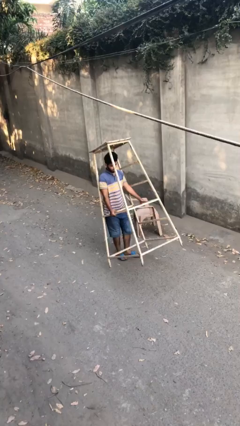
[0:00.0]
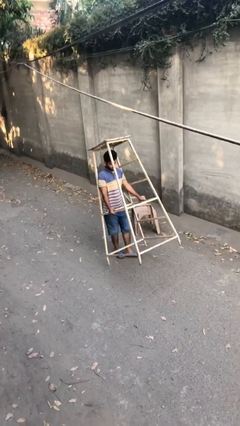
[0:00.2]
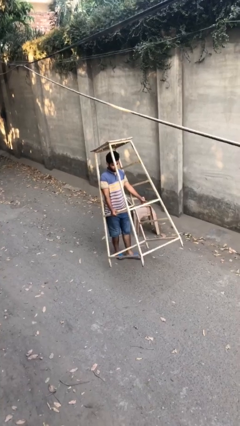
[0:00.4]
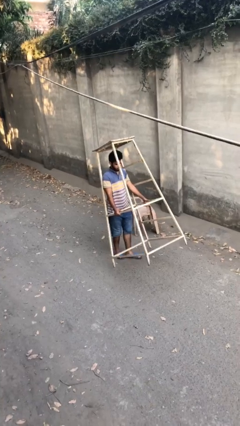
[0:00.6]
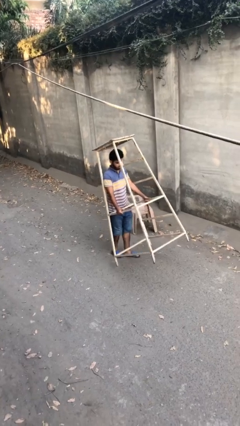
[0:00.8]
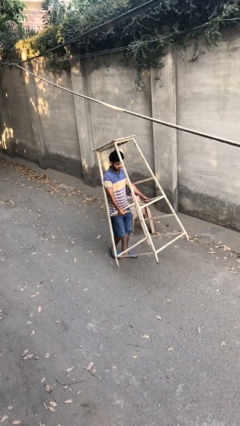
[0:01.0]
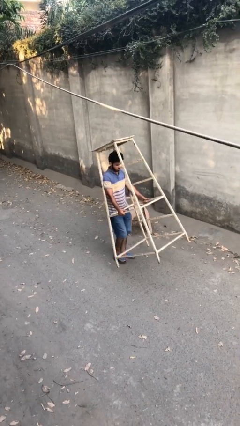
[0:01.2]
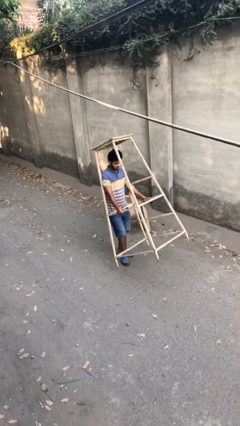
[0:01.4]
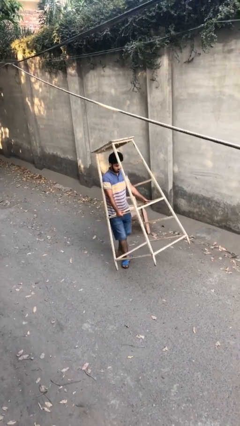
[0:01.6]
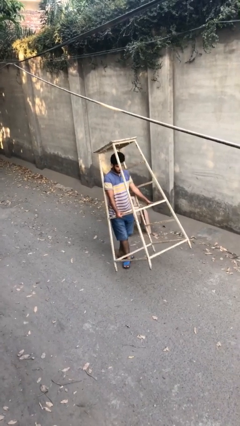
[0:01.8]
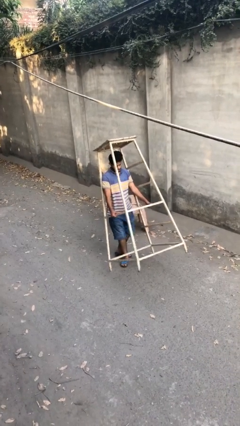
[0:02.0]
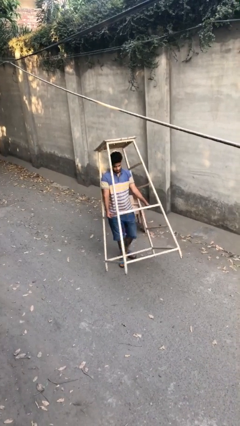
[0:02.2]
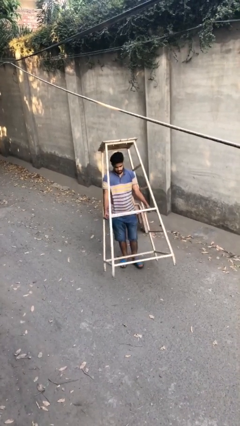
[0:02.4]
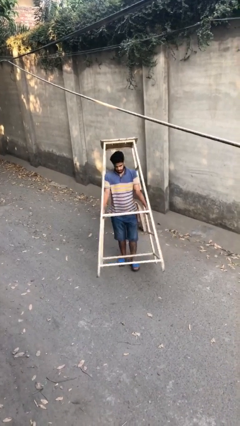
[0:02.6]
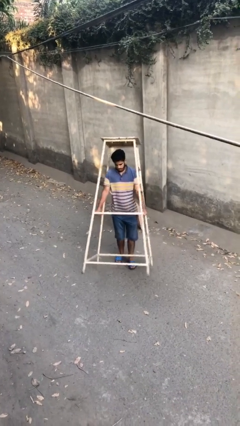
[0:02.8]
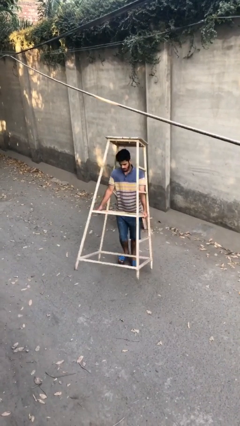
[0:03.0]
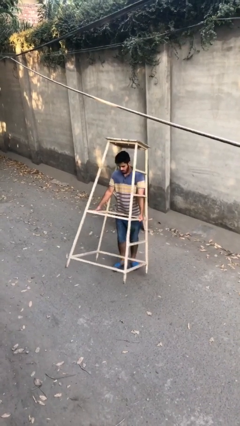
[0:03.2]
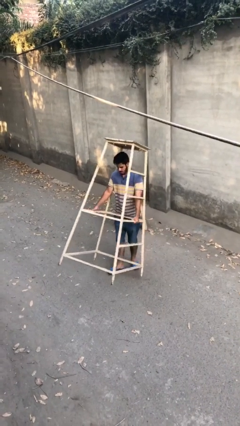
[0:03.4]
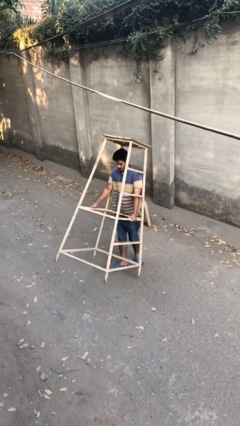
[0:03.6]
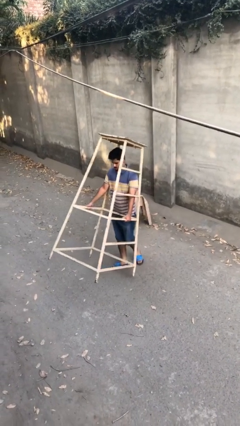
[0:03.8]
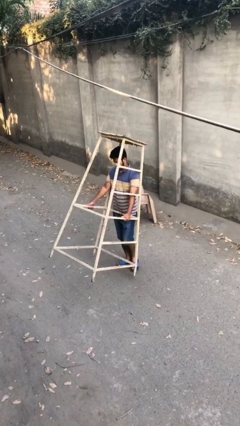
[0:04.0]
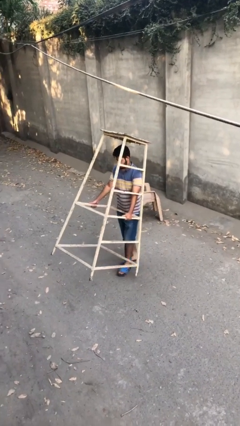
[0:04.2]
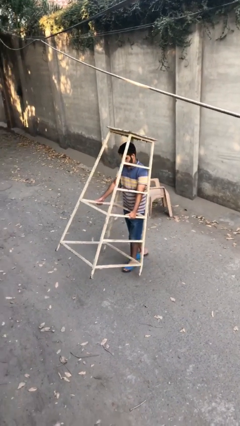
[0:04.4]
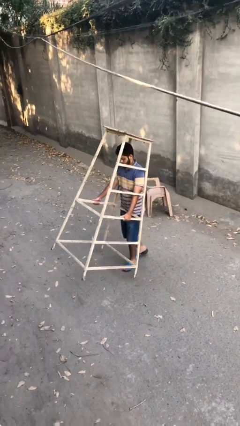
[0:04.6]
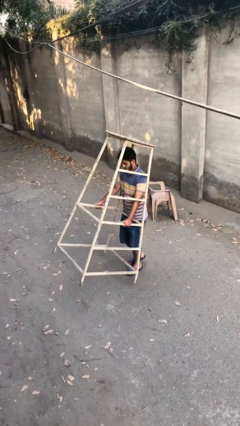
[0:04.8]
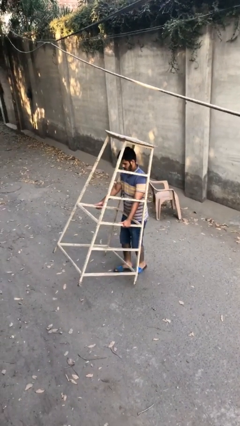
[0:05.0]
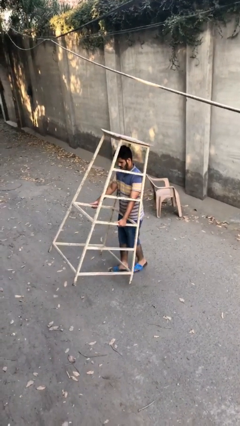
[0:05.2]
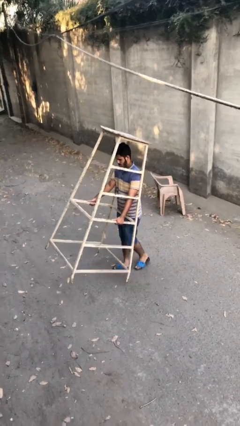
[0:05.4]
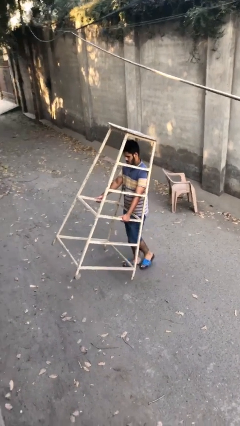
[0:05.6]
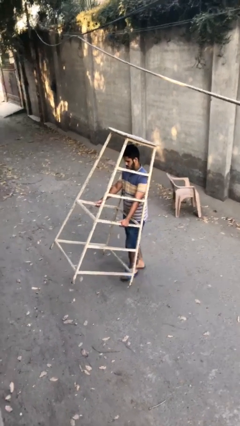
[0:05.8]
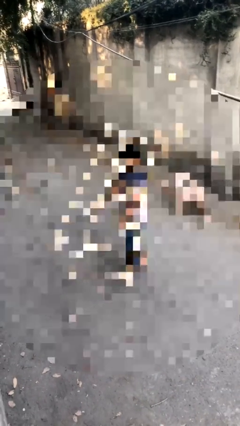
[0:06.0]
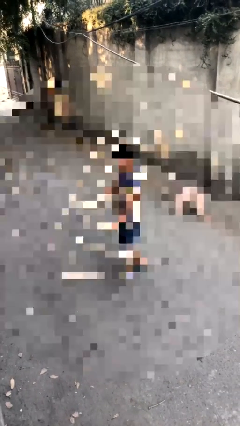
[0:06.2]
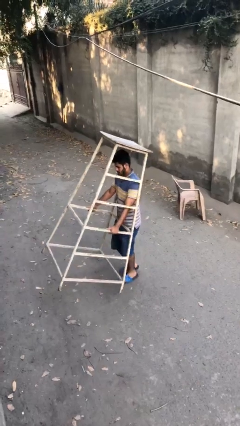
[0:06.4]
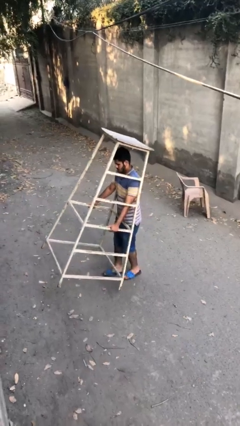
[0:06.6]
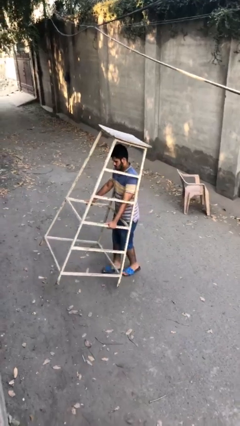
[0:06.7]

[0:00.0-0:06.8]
person carries heavy object

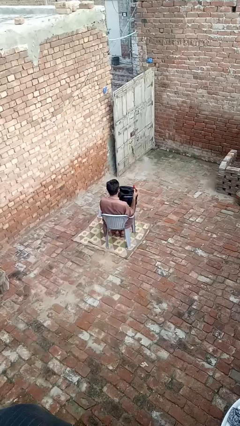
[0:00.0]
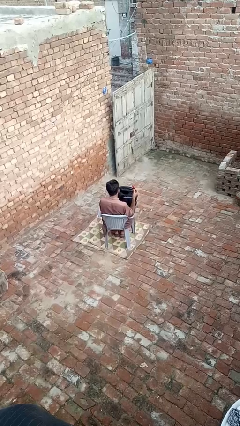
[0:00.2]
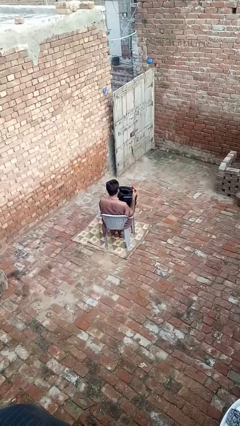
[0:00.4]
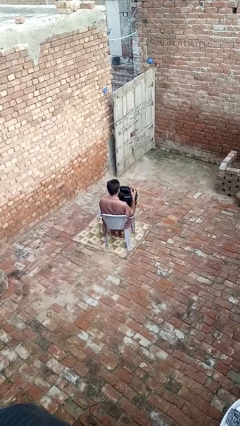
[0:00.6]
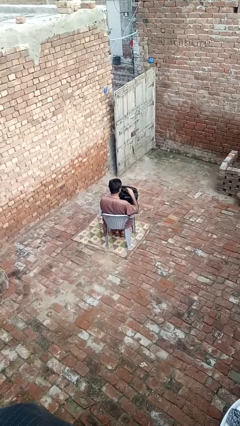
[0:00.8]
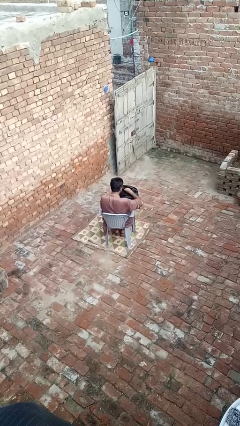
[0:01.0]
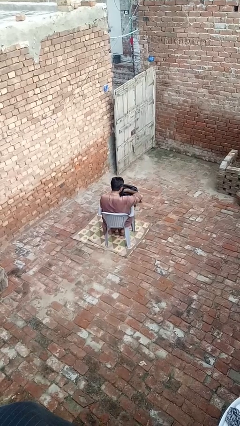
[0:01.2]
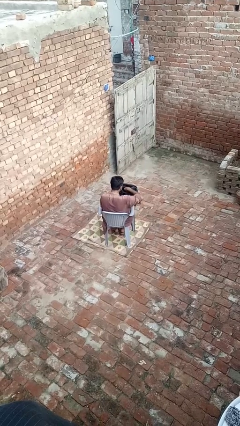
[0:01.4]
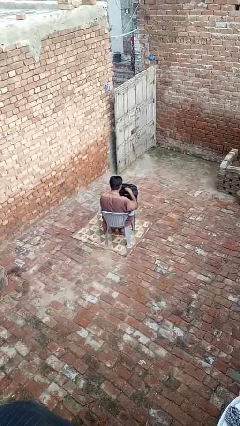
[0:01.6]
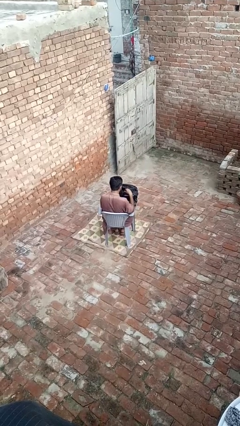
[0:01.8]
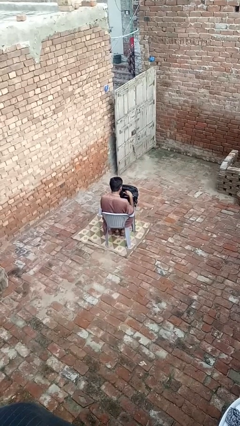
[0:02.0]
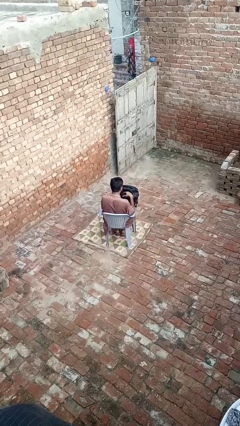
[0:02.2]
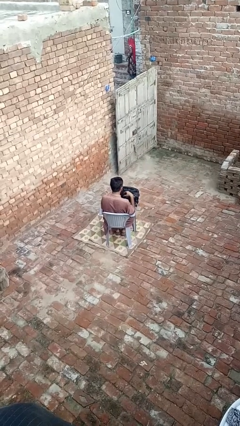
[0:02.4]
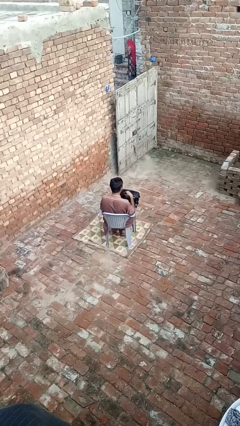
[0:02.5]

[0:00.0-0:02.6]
person puts object into backpack

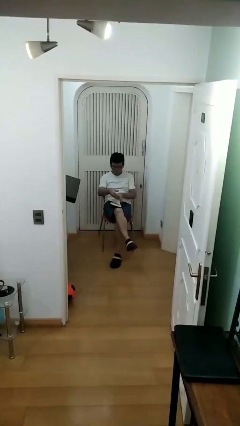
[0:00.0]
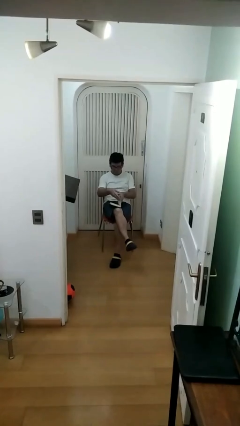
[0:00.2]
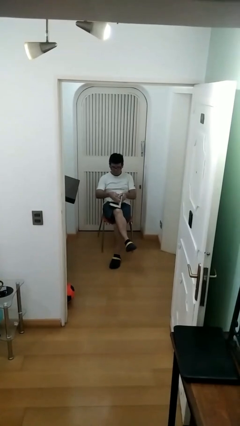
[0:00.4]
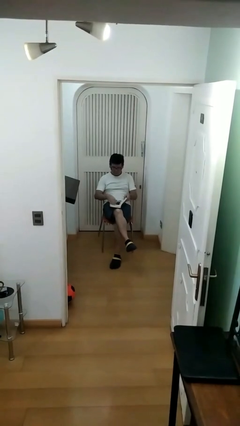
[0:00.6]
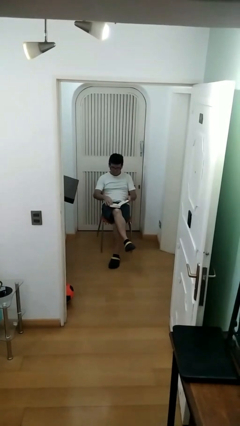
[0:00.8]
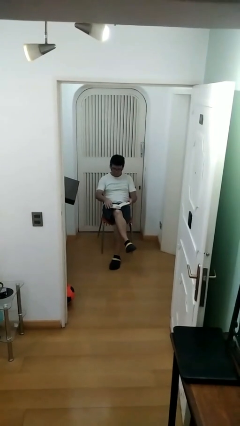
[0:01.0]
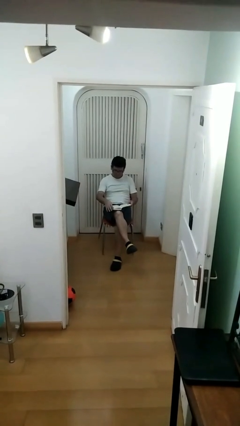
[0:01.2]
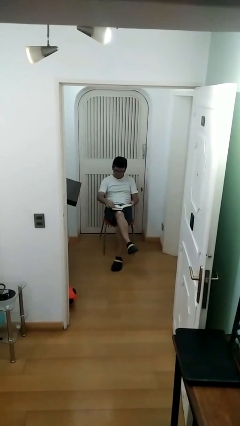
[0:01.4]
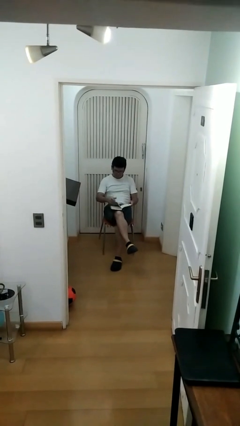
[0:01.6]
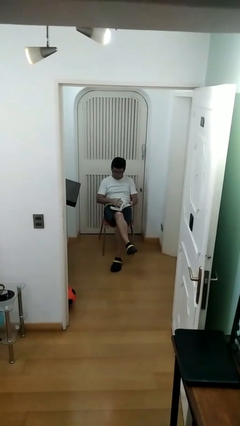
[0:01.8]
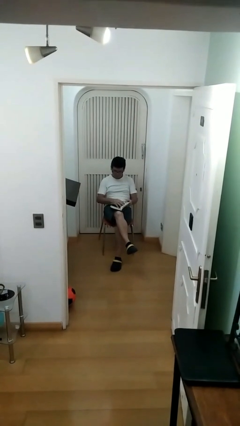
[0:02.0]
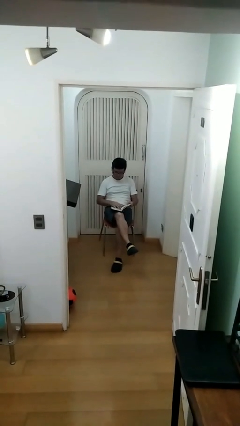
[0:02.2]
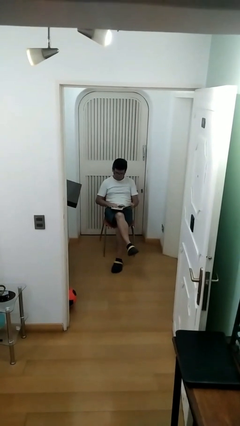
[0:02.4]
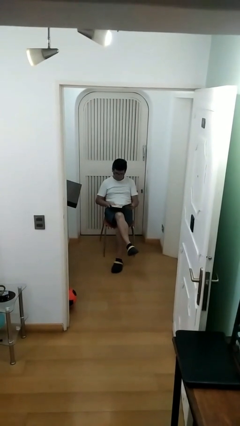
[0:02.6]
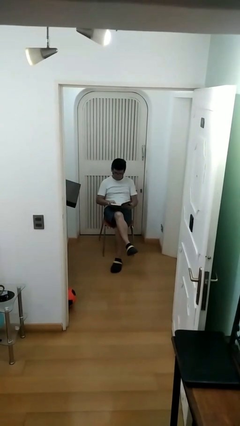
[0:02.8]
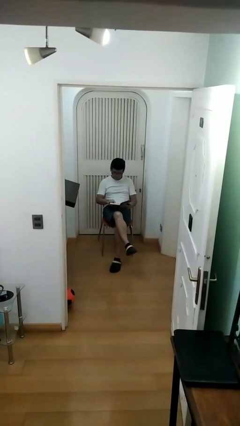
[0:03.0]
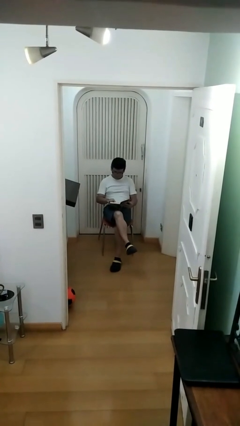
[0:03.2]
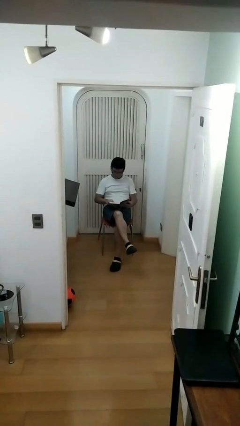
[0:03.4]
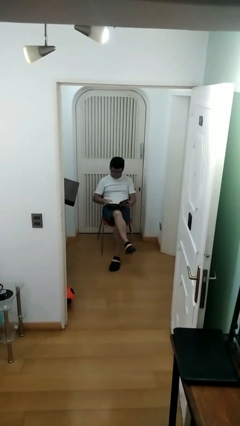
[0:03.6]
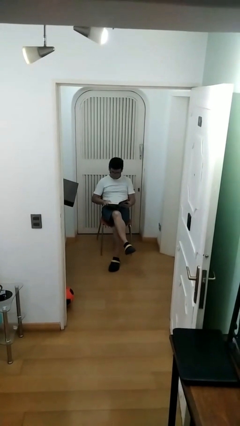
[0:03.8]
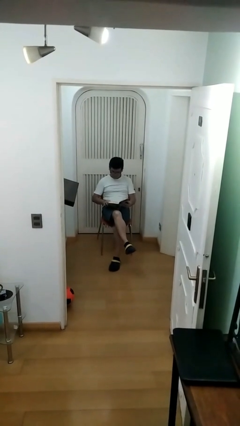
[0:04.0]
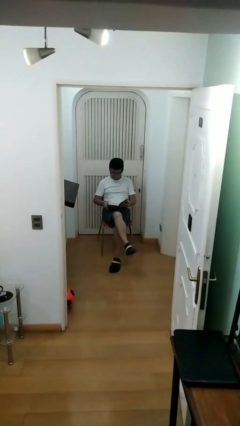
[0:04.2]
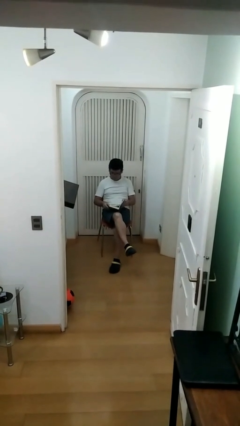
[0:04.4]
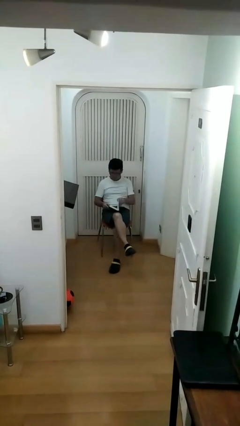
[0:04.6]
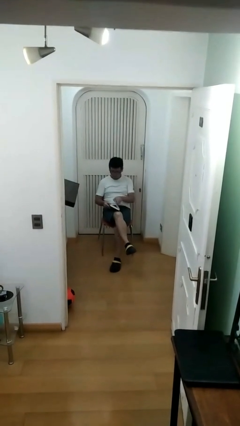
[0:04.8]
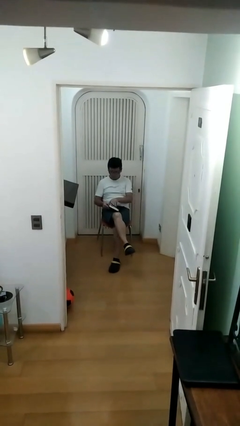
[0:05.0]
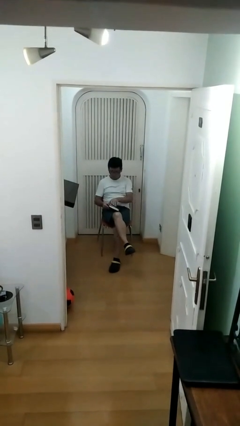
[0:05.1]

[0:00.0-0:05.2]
person reads document

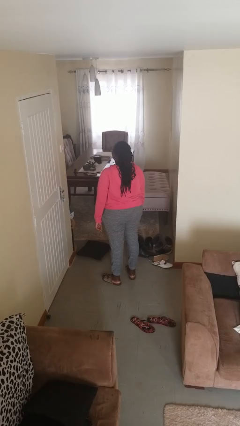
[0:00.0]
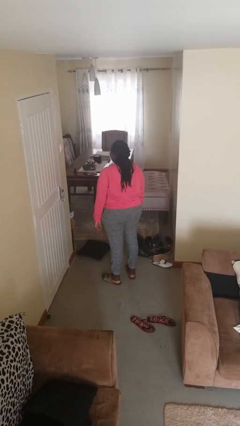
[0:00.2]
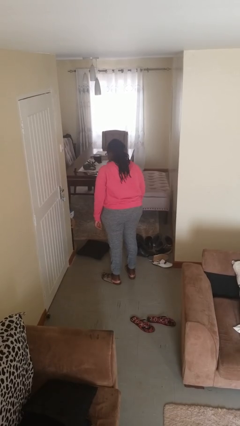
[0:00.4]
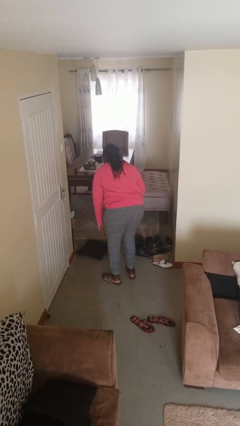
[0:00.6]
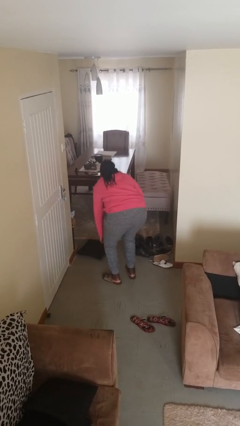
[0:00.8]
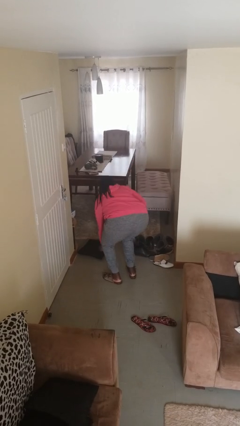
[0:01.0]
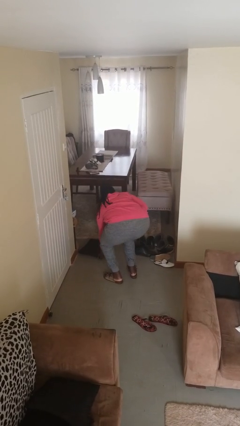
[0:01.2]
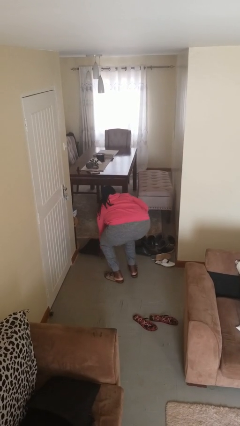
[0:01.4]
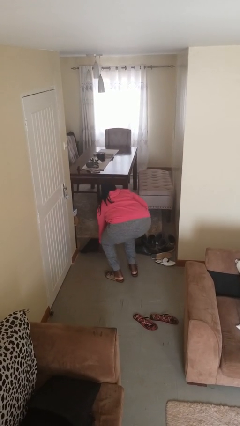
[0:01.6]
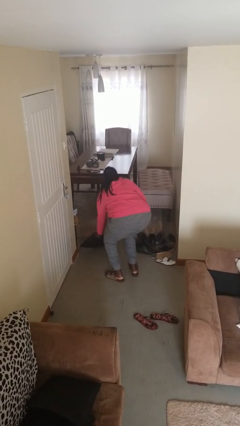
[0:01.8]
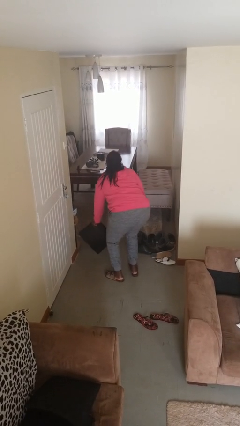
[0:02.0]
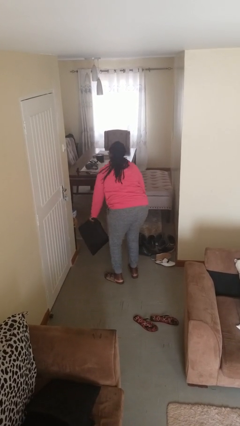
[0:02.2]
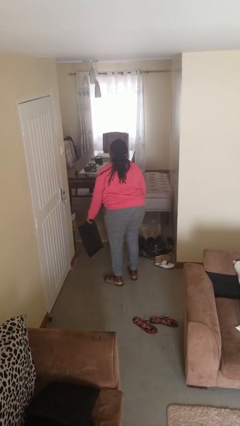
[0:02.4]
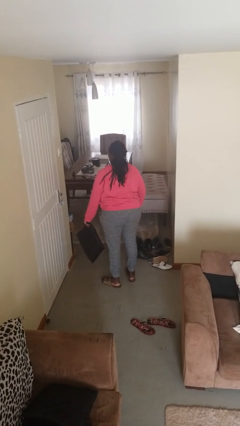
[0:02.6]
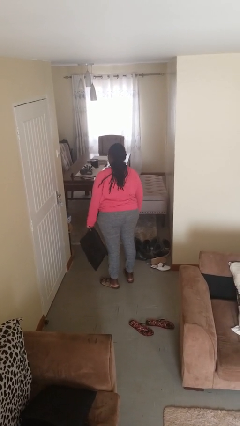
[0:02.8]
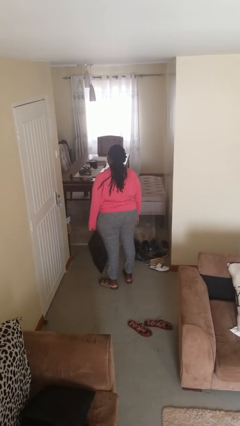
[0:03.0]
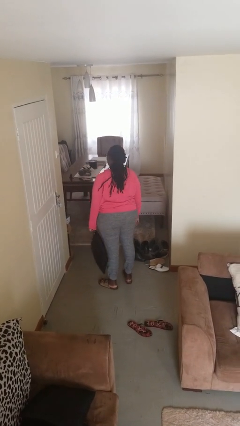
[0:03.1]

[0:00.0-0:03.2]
person picks up object from floor

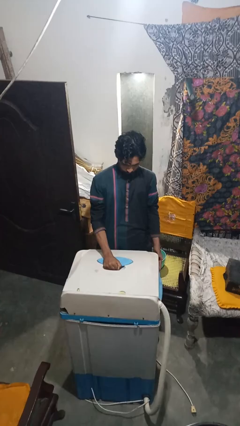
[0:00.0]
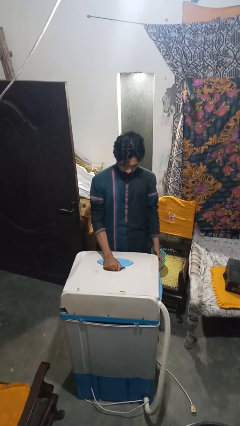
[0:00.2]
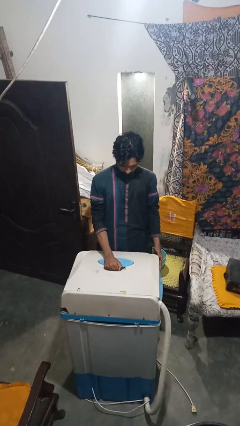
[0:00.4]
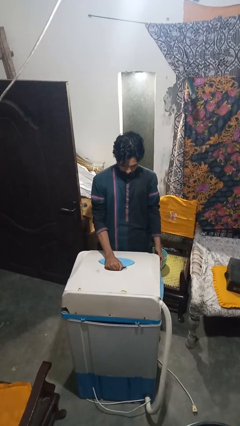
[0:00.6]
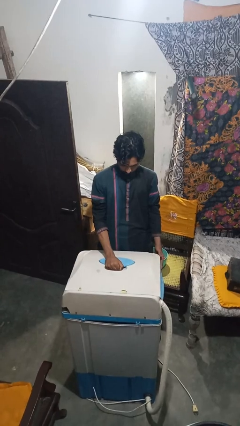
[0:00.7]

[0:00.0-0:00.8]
person closes clothes washer
